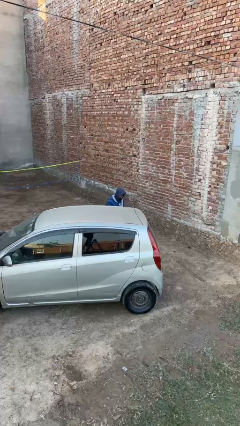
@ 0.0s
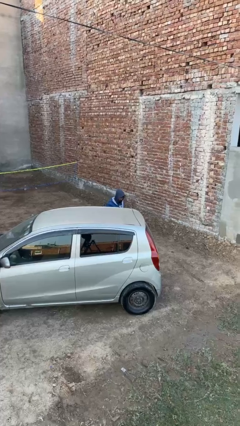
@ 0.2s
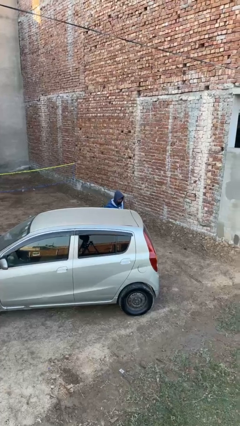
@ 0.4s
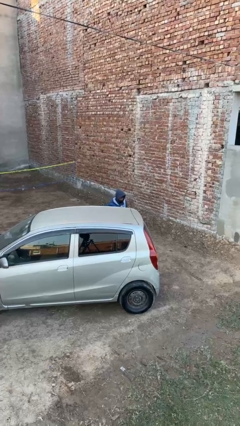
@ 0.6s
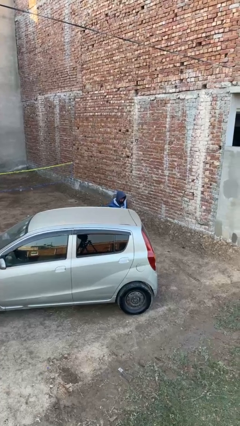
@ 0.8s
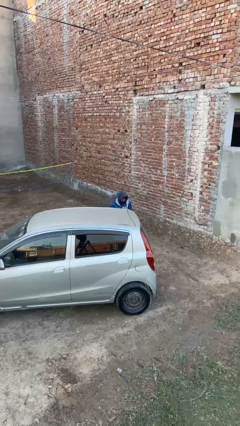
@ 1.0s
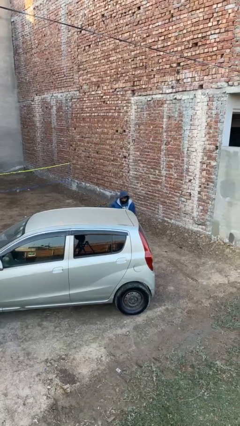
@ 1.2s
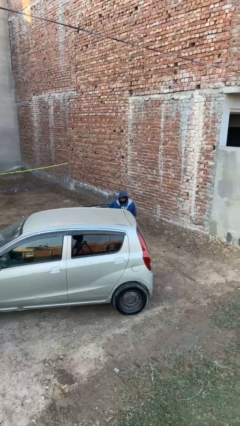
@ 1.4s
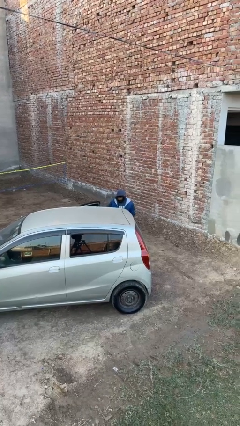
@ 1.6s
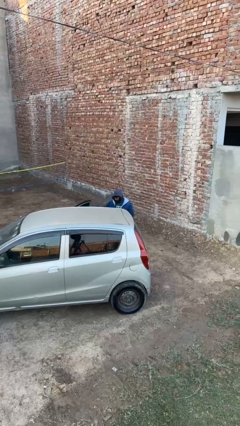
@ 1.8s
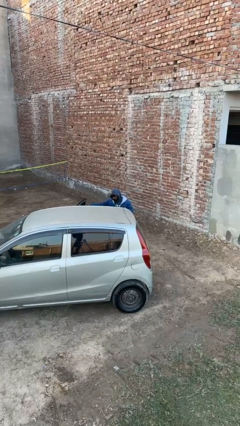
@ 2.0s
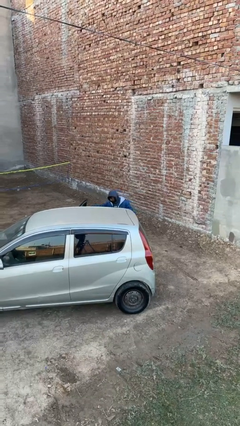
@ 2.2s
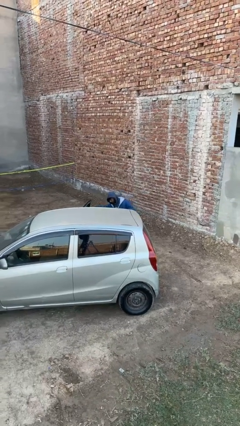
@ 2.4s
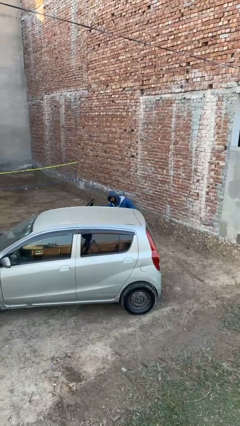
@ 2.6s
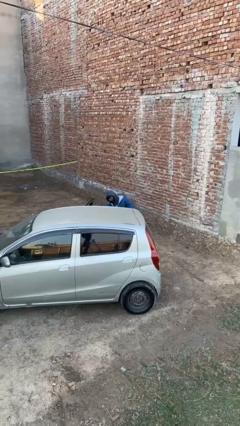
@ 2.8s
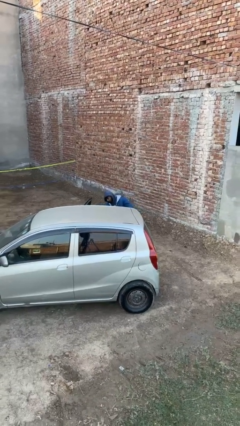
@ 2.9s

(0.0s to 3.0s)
person opens car door

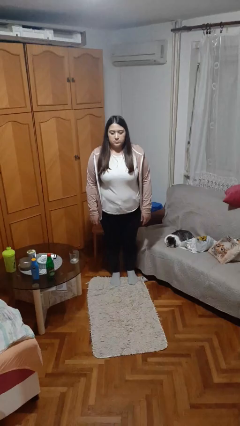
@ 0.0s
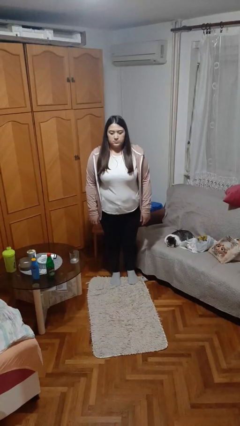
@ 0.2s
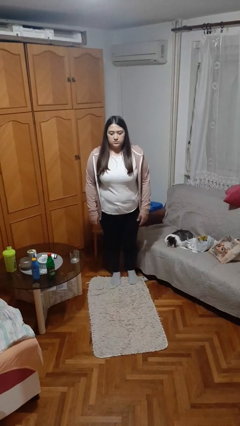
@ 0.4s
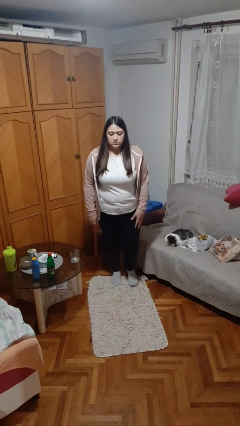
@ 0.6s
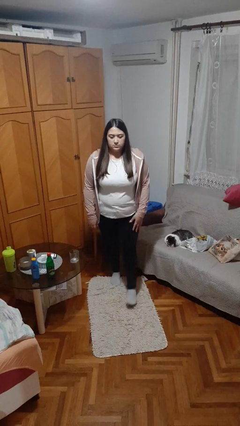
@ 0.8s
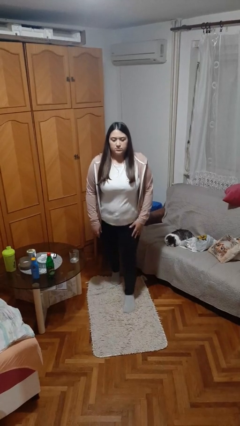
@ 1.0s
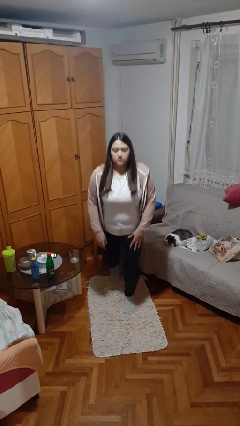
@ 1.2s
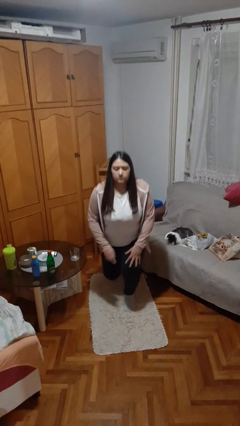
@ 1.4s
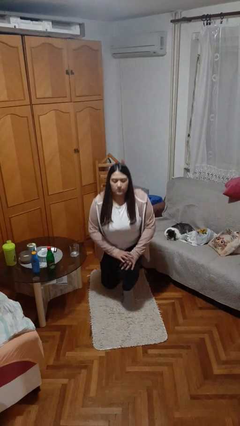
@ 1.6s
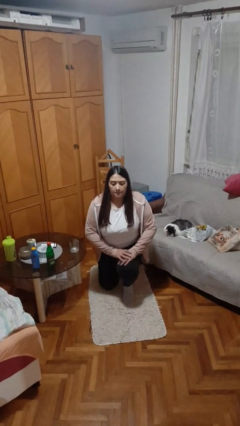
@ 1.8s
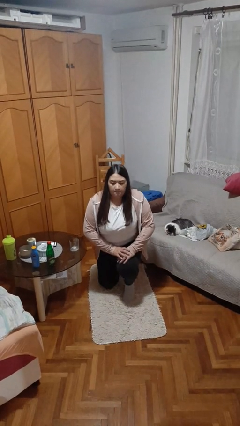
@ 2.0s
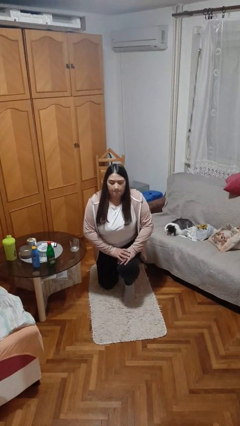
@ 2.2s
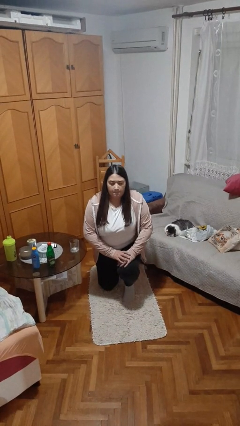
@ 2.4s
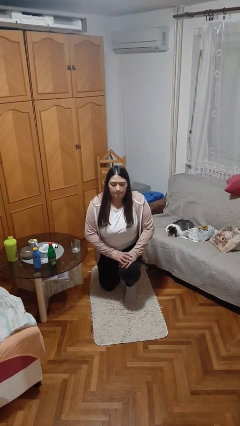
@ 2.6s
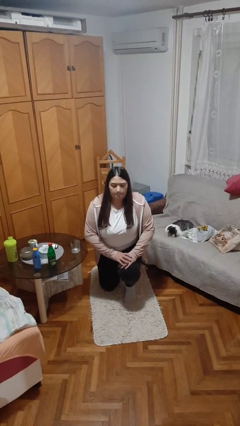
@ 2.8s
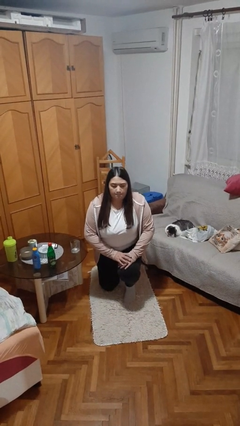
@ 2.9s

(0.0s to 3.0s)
person kneels

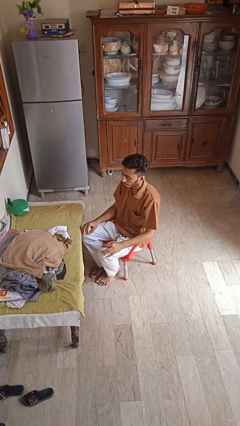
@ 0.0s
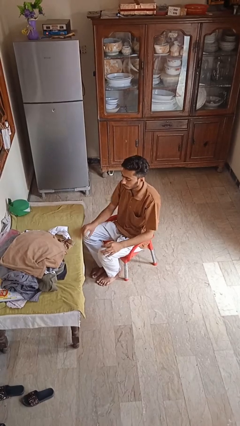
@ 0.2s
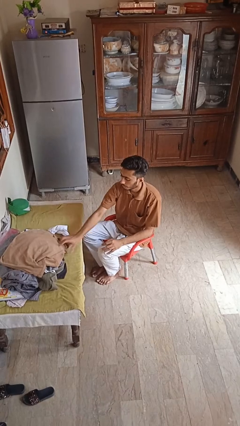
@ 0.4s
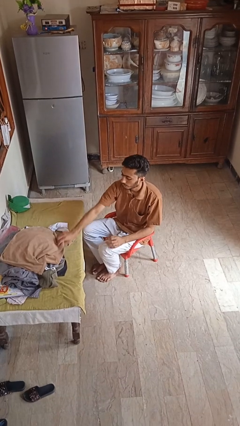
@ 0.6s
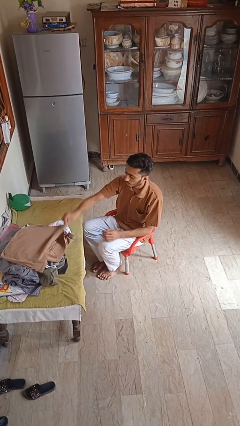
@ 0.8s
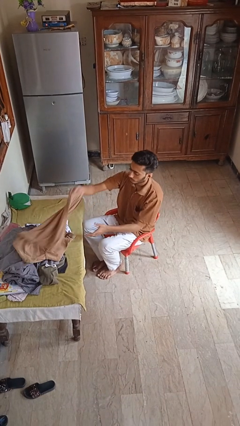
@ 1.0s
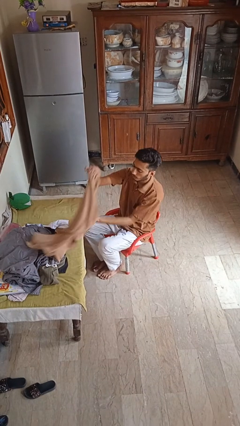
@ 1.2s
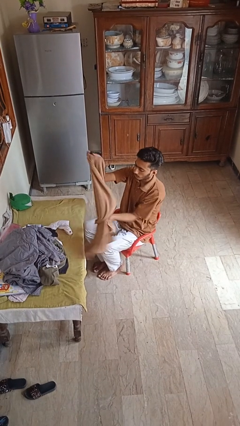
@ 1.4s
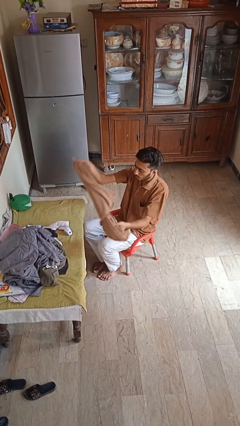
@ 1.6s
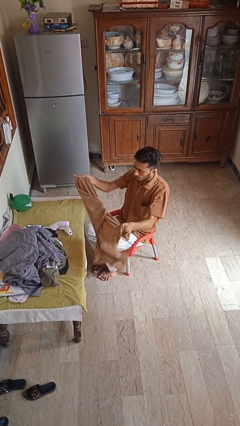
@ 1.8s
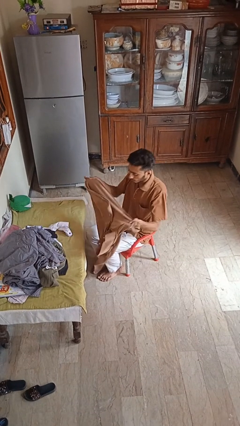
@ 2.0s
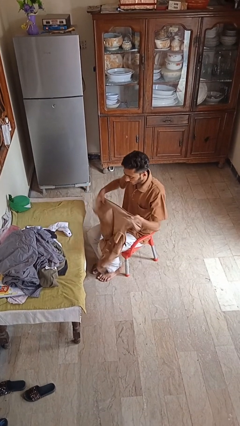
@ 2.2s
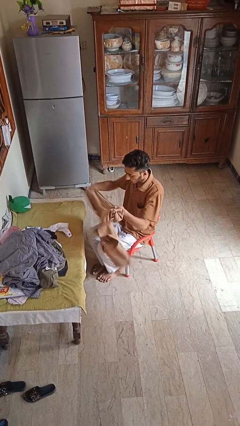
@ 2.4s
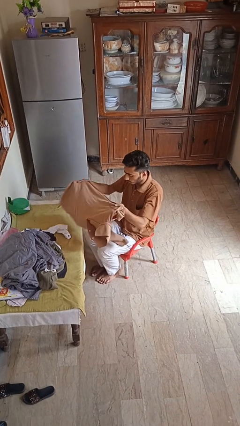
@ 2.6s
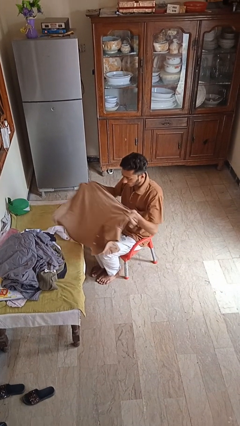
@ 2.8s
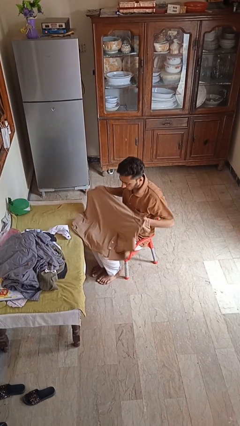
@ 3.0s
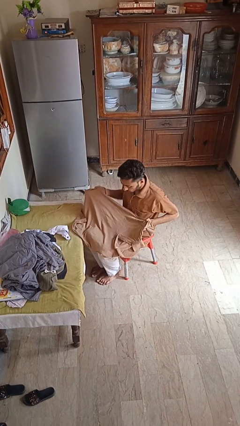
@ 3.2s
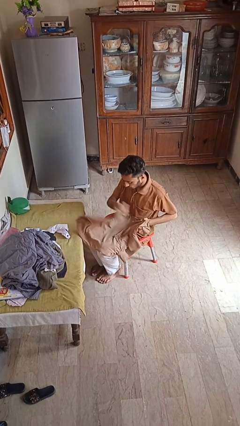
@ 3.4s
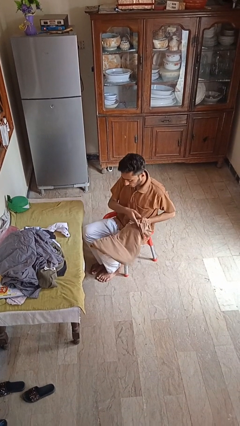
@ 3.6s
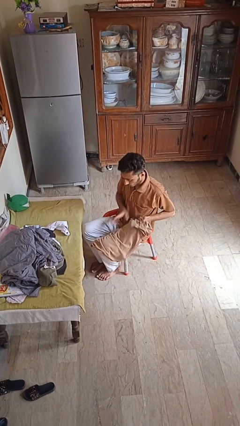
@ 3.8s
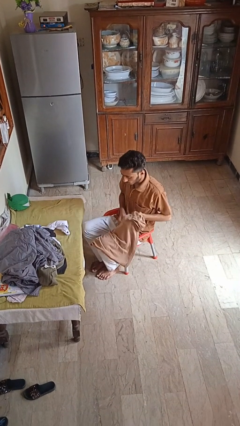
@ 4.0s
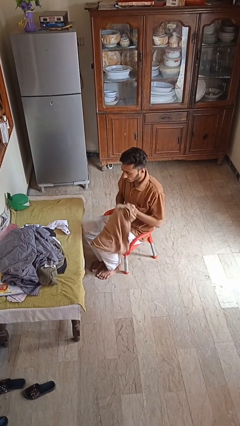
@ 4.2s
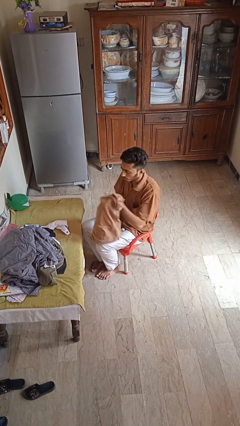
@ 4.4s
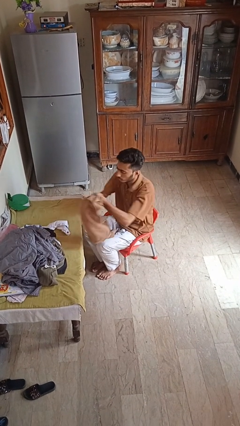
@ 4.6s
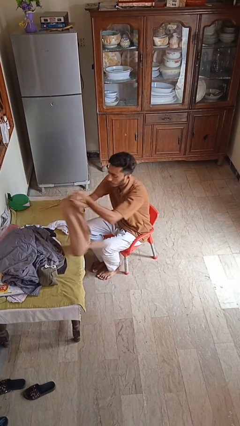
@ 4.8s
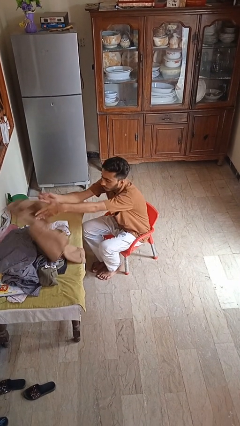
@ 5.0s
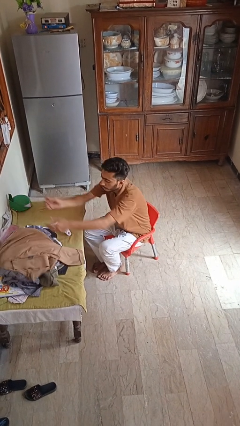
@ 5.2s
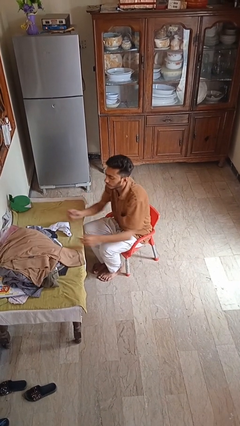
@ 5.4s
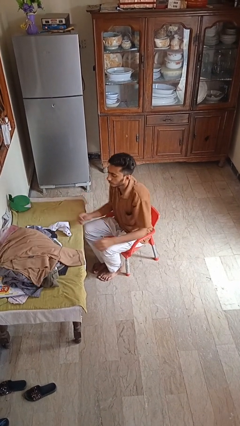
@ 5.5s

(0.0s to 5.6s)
person folds shirt

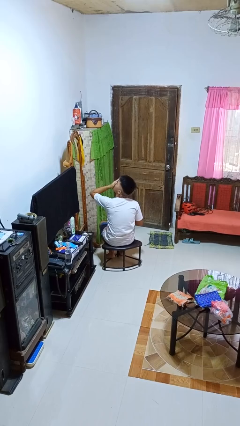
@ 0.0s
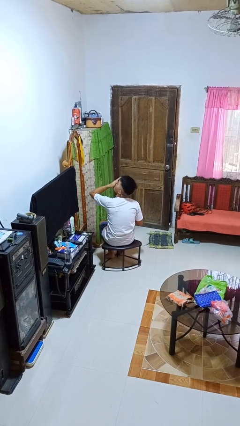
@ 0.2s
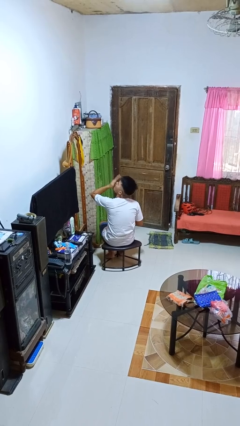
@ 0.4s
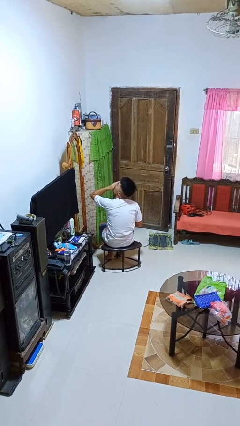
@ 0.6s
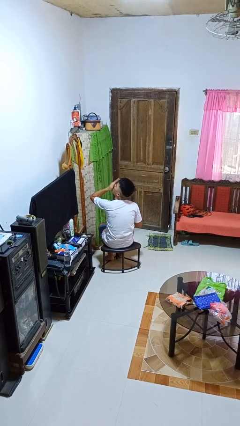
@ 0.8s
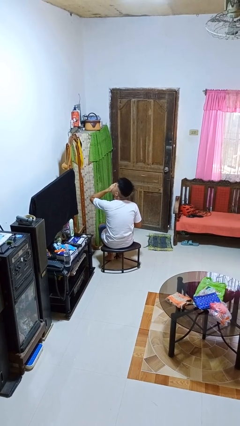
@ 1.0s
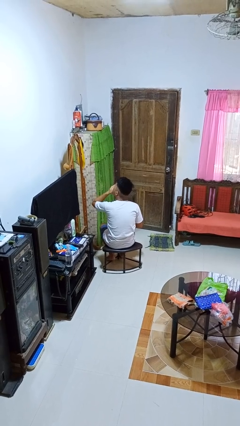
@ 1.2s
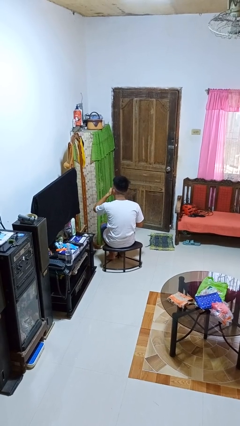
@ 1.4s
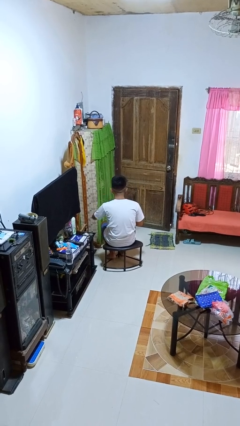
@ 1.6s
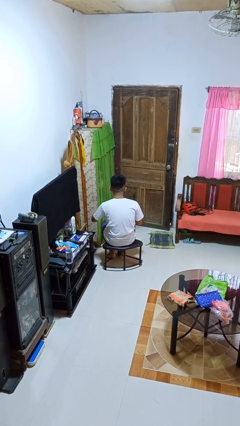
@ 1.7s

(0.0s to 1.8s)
person yawns

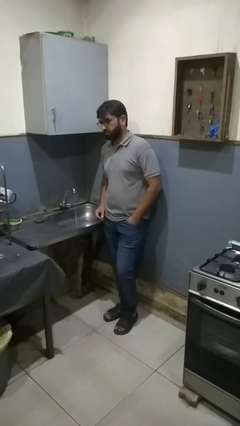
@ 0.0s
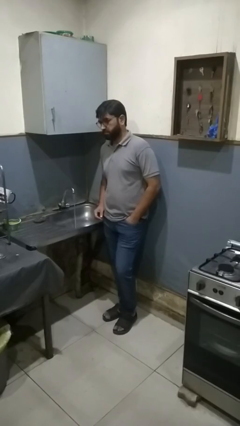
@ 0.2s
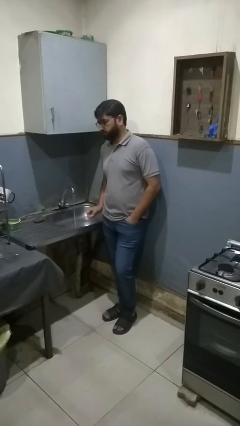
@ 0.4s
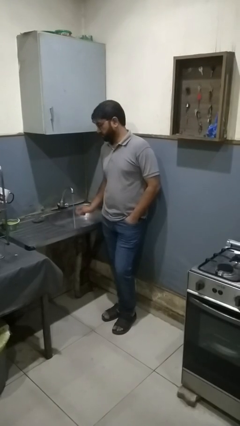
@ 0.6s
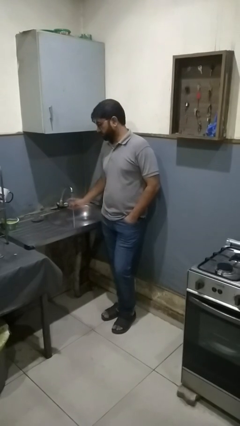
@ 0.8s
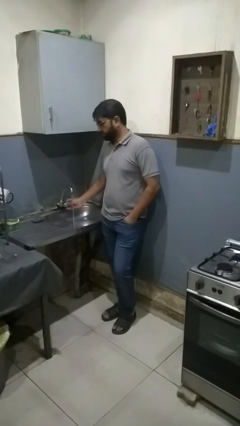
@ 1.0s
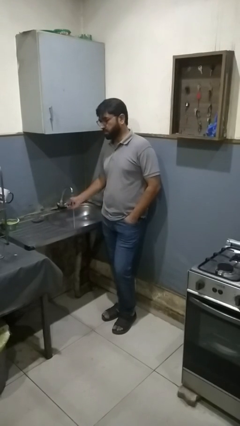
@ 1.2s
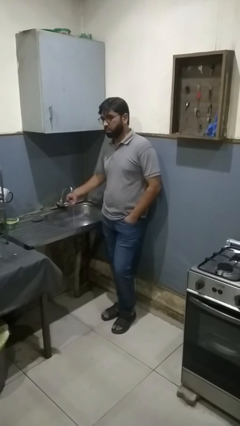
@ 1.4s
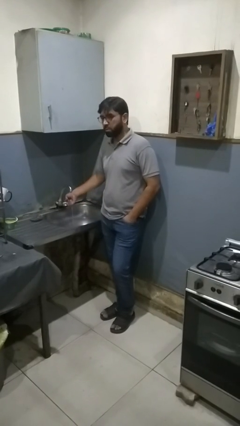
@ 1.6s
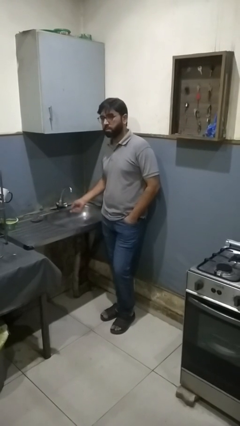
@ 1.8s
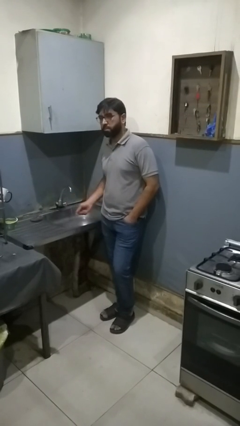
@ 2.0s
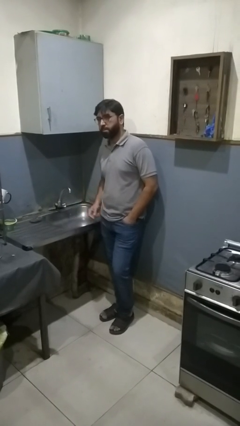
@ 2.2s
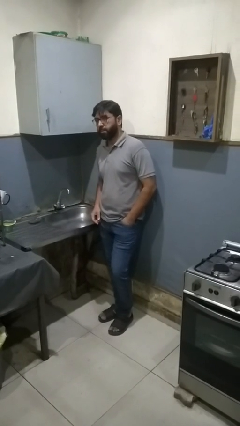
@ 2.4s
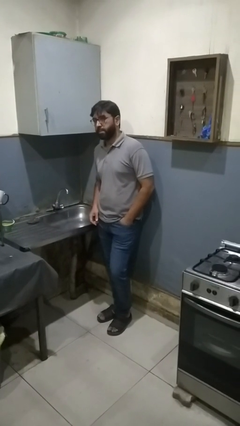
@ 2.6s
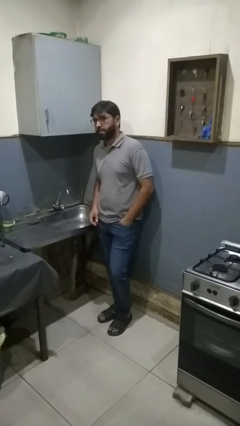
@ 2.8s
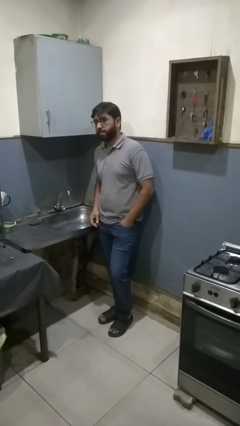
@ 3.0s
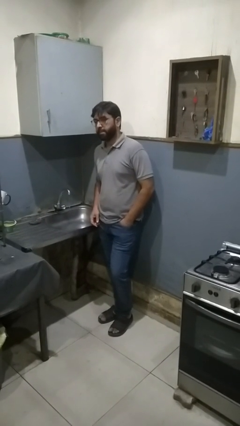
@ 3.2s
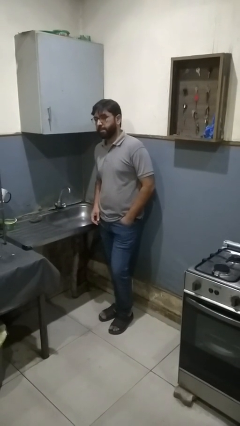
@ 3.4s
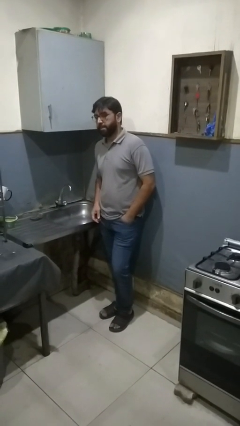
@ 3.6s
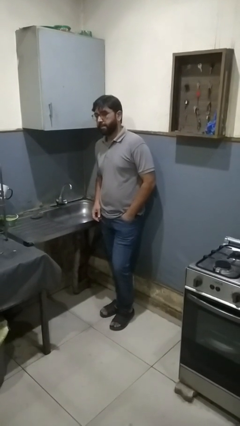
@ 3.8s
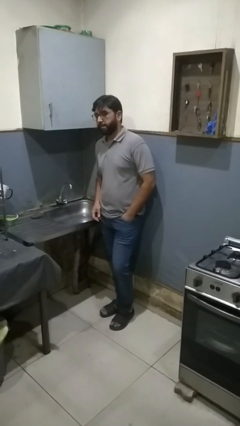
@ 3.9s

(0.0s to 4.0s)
person turns off faucet

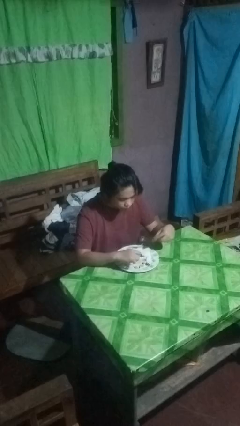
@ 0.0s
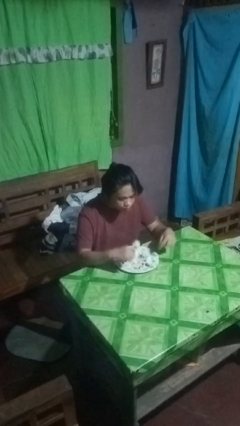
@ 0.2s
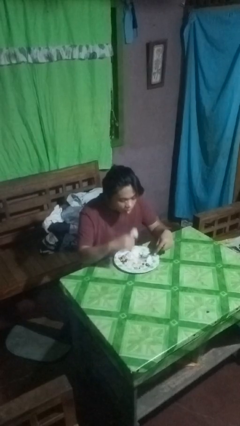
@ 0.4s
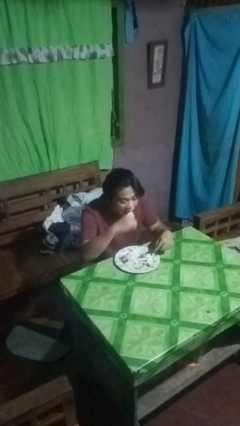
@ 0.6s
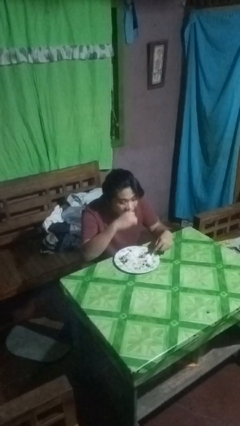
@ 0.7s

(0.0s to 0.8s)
person eats with utensil
